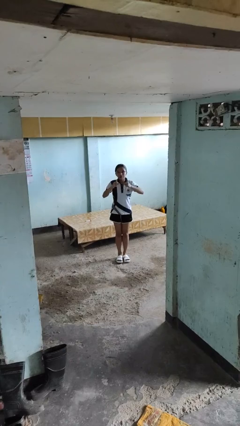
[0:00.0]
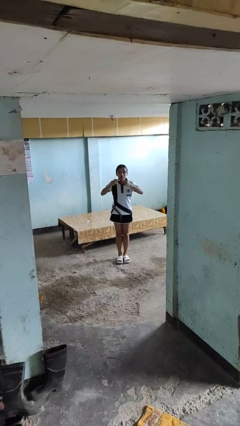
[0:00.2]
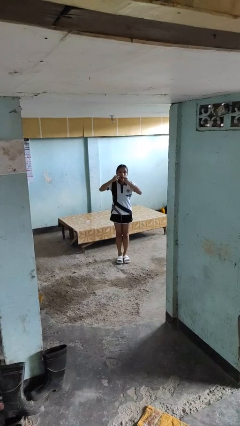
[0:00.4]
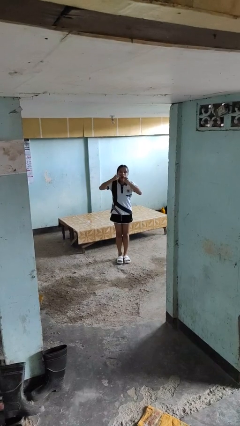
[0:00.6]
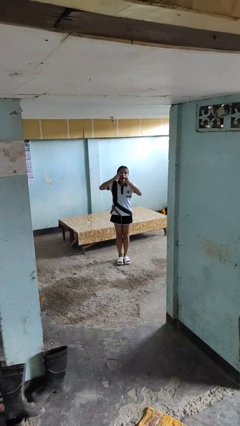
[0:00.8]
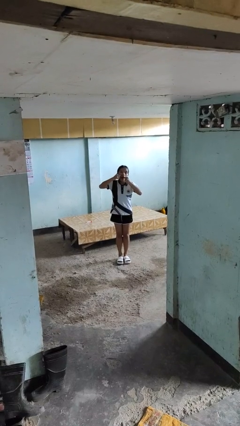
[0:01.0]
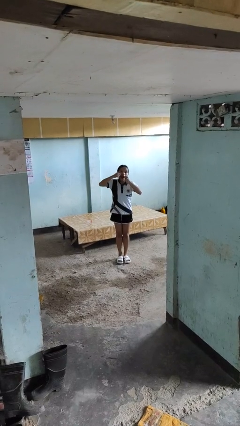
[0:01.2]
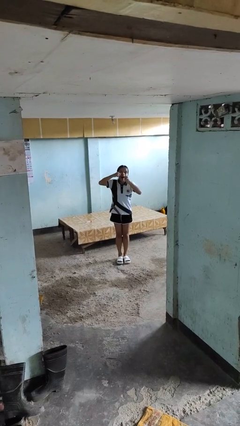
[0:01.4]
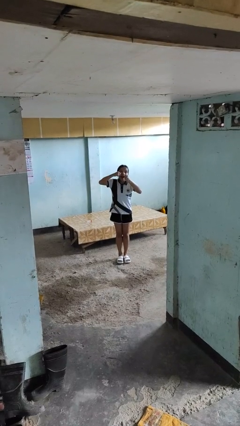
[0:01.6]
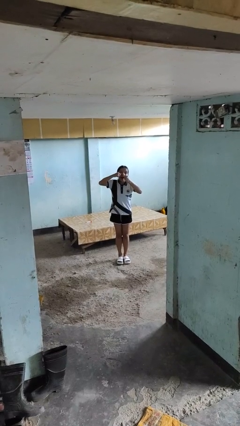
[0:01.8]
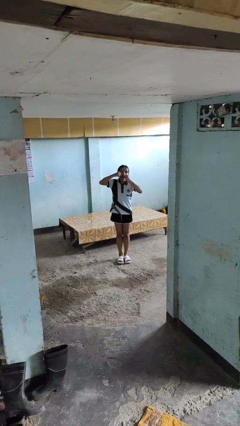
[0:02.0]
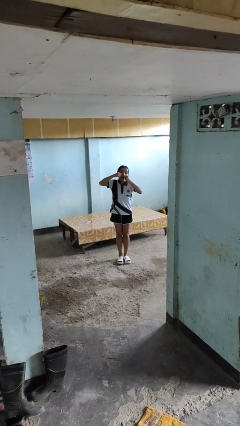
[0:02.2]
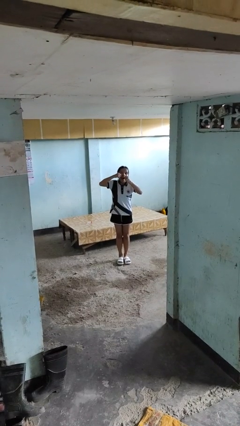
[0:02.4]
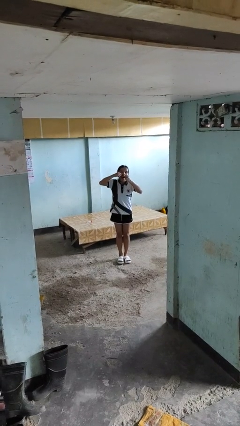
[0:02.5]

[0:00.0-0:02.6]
person flosses

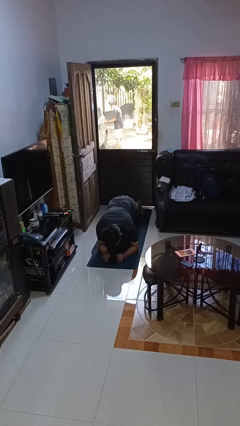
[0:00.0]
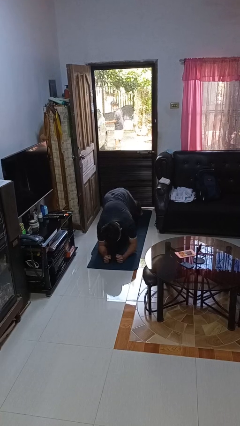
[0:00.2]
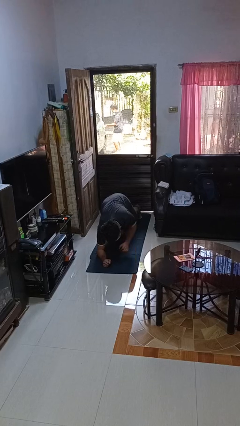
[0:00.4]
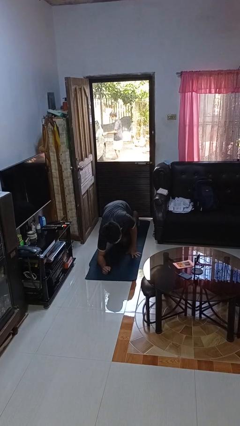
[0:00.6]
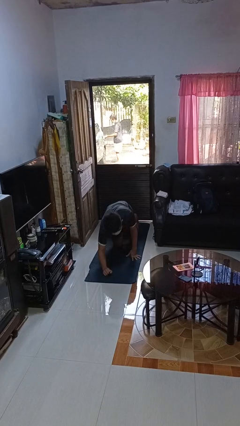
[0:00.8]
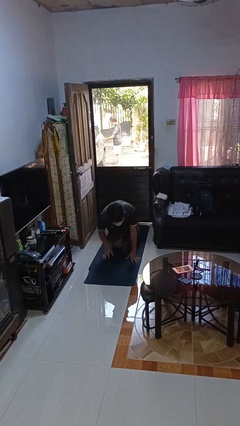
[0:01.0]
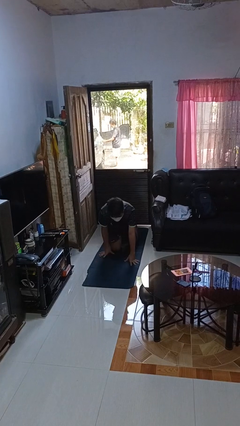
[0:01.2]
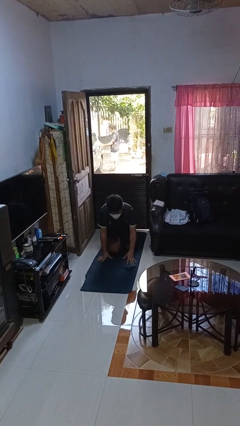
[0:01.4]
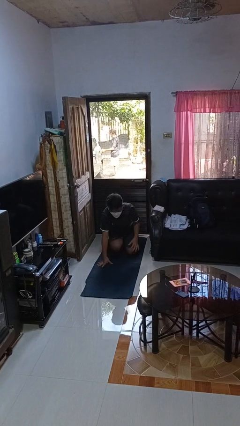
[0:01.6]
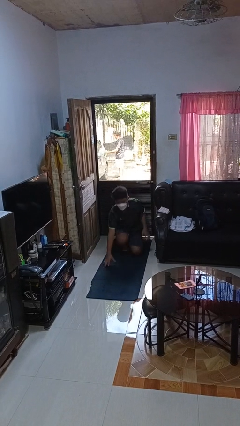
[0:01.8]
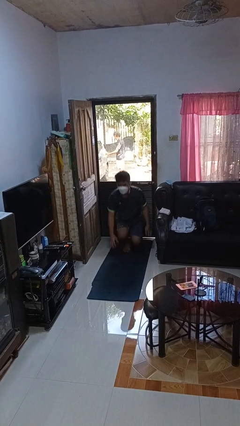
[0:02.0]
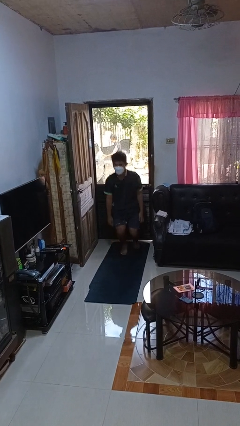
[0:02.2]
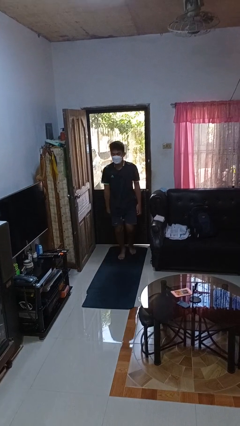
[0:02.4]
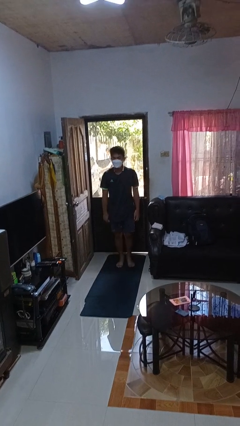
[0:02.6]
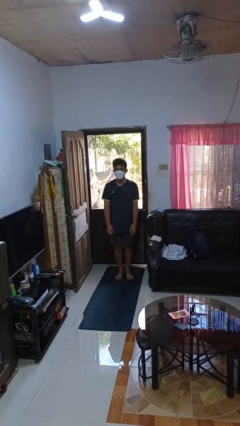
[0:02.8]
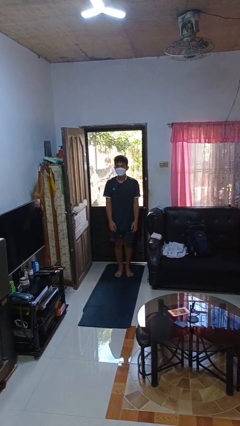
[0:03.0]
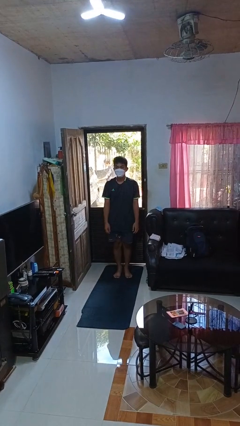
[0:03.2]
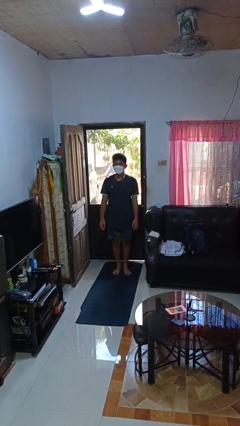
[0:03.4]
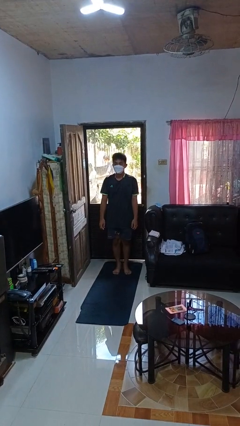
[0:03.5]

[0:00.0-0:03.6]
person stands up from floor

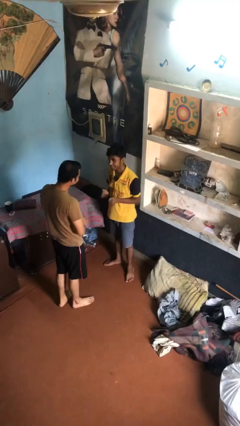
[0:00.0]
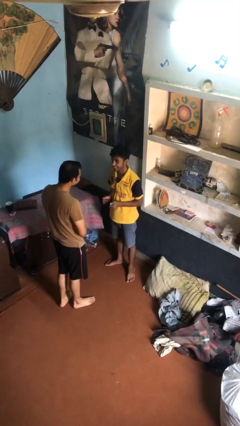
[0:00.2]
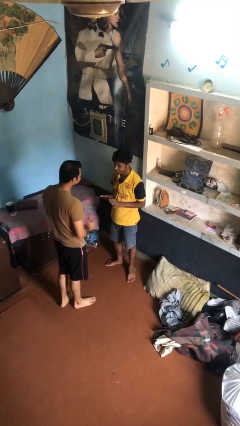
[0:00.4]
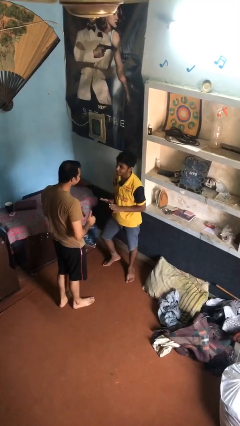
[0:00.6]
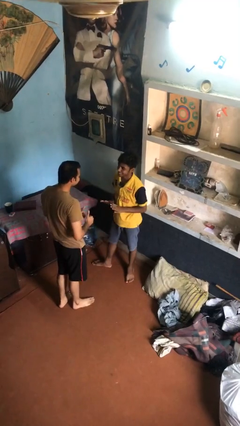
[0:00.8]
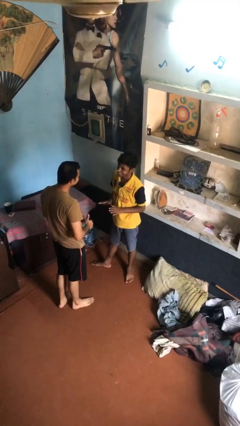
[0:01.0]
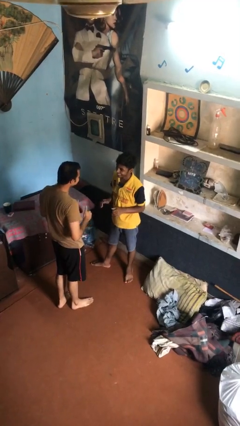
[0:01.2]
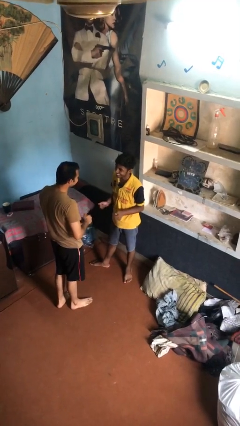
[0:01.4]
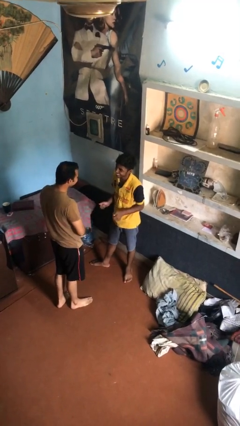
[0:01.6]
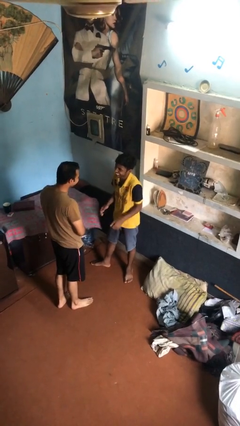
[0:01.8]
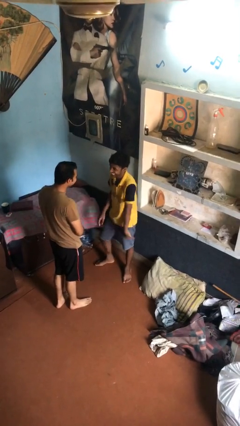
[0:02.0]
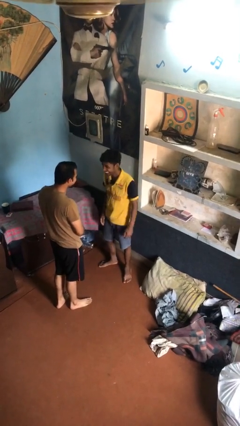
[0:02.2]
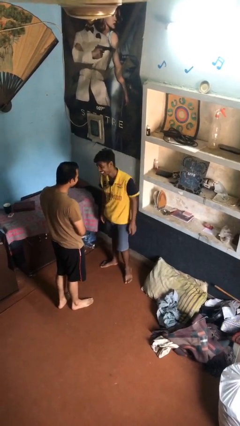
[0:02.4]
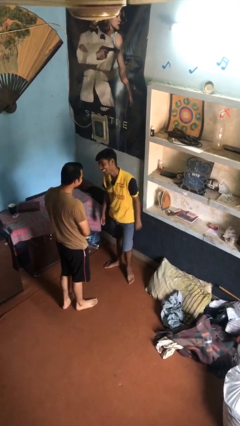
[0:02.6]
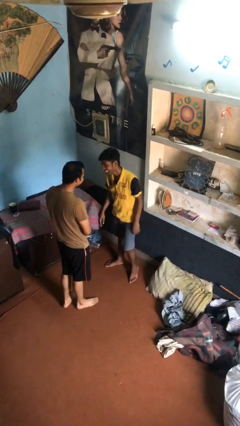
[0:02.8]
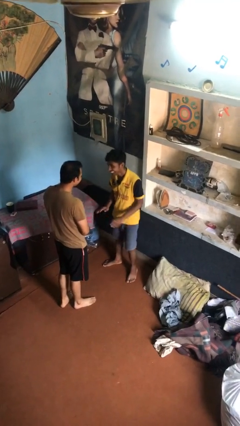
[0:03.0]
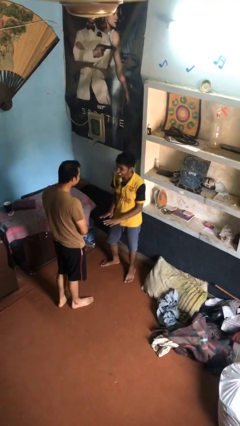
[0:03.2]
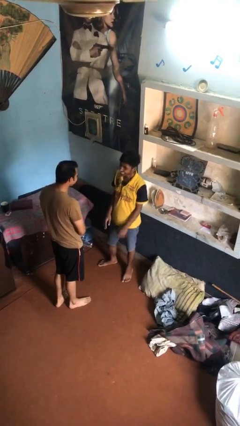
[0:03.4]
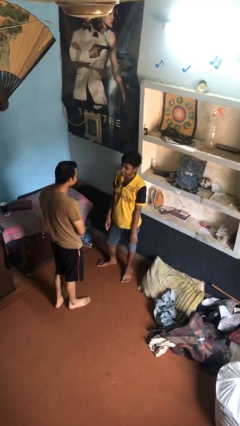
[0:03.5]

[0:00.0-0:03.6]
person talks to person

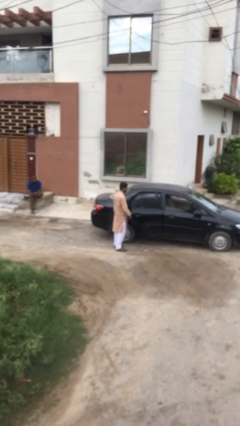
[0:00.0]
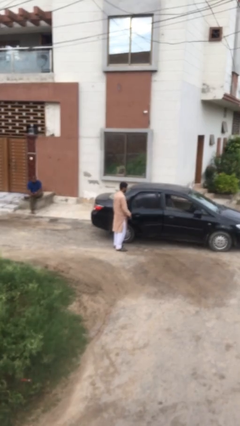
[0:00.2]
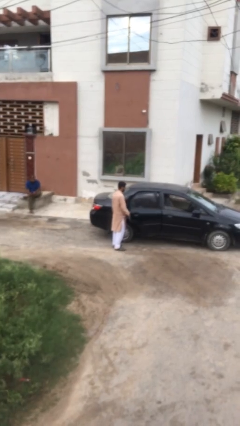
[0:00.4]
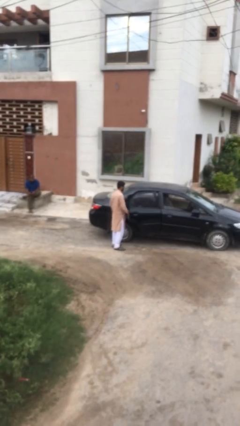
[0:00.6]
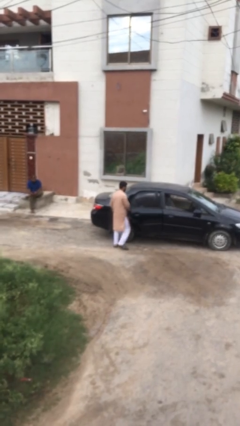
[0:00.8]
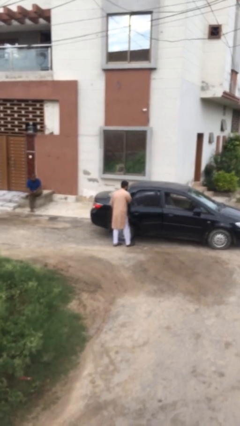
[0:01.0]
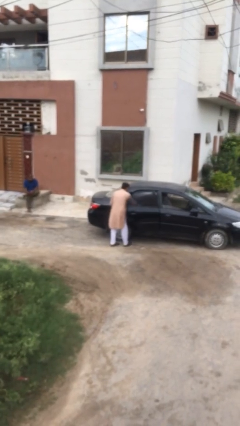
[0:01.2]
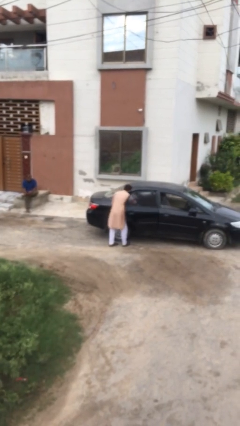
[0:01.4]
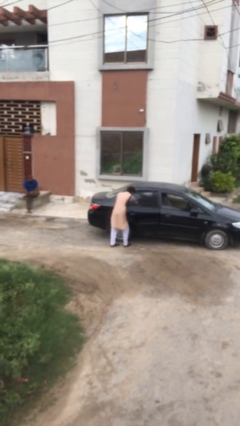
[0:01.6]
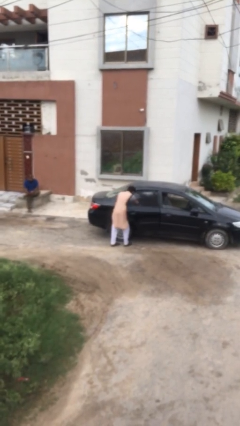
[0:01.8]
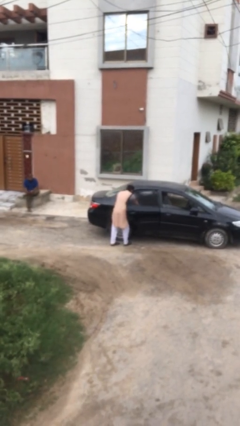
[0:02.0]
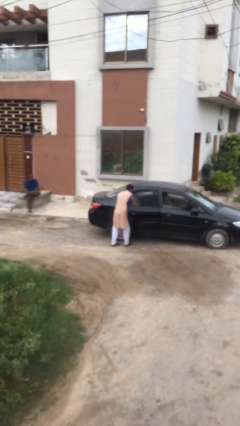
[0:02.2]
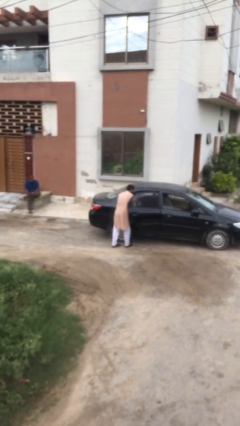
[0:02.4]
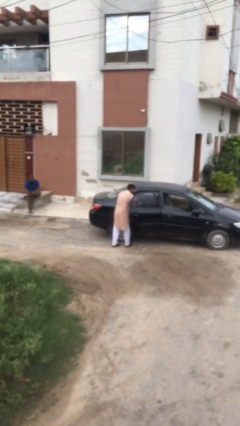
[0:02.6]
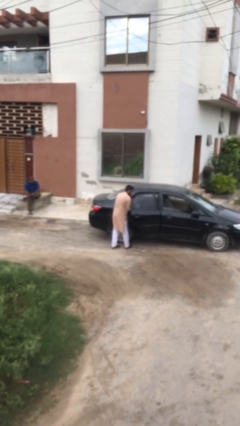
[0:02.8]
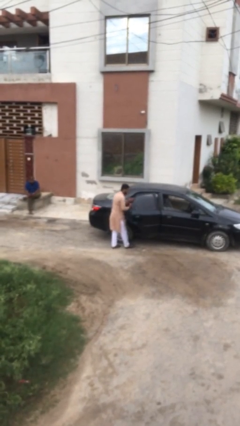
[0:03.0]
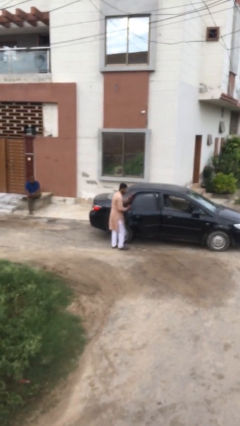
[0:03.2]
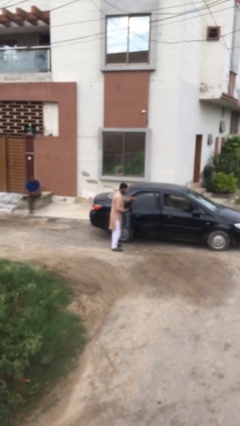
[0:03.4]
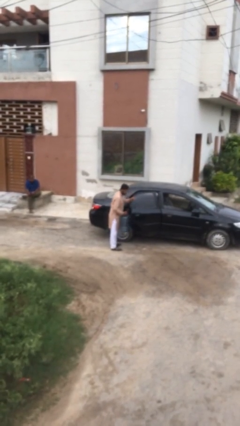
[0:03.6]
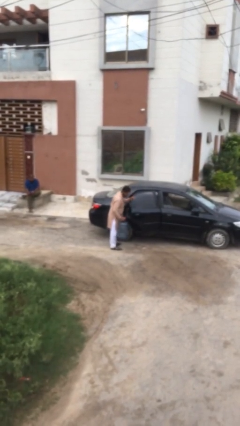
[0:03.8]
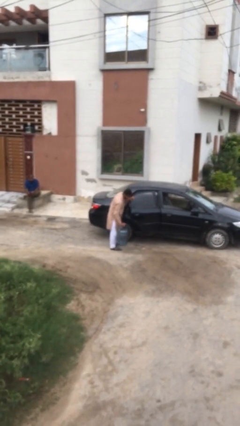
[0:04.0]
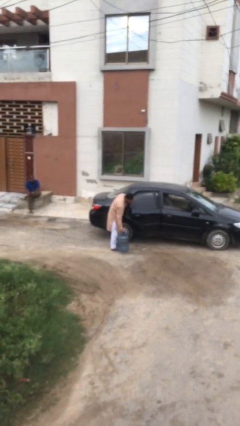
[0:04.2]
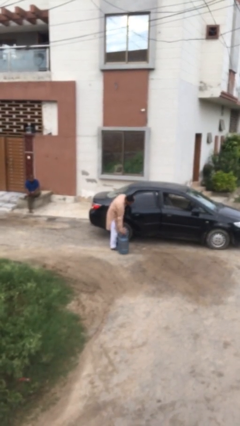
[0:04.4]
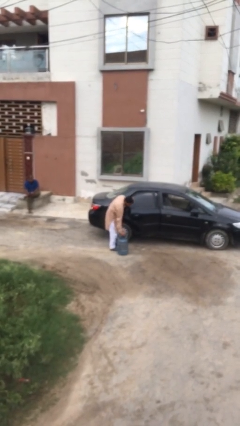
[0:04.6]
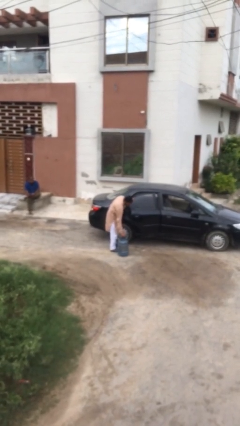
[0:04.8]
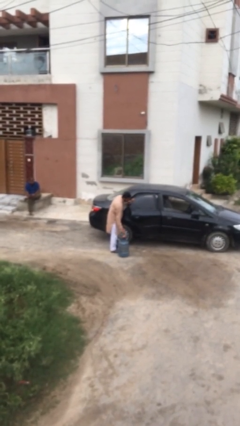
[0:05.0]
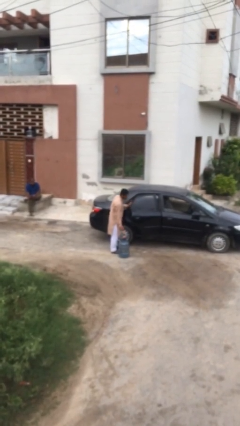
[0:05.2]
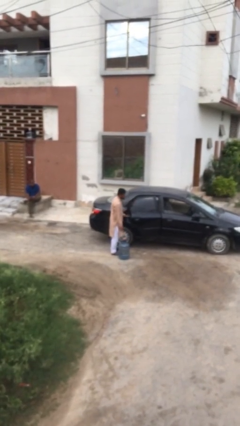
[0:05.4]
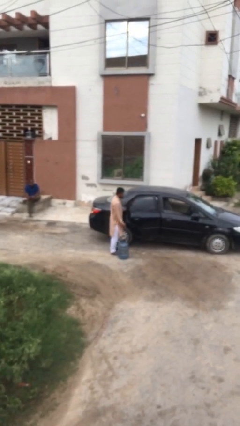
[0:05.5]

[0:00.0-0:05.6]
person unloads car

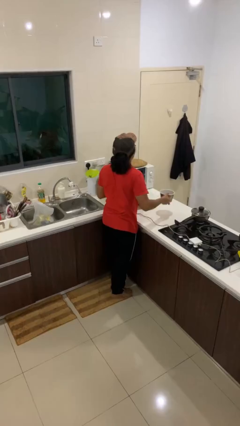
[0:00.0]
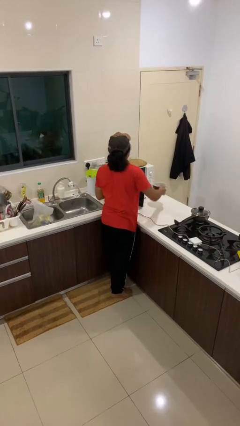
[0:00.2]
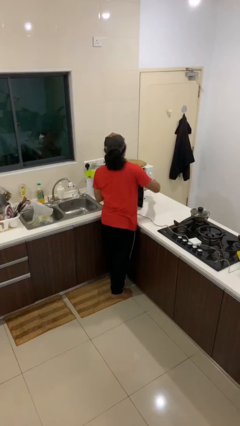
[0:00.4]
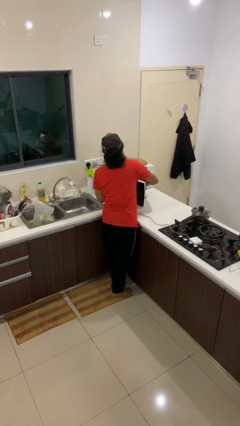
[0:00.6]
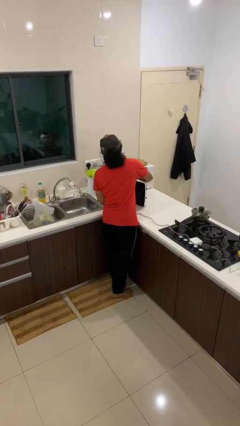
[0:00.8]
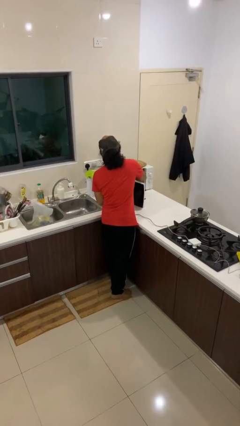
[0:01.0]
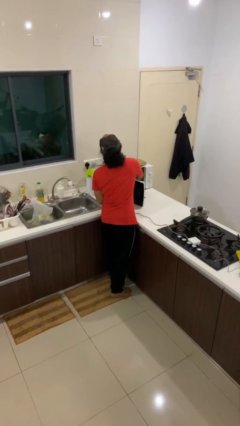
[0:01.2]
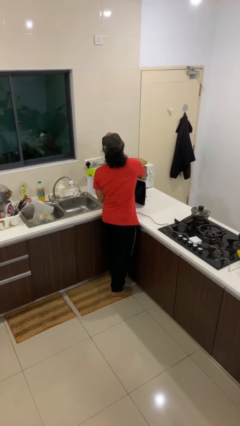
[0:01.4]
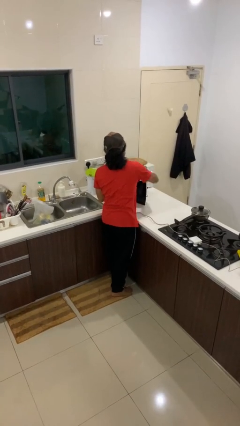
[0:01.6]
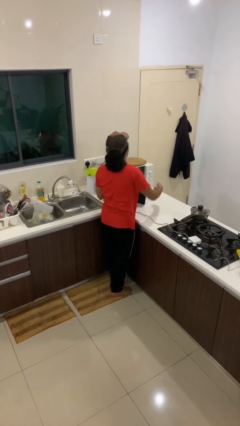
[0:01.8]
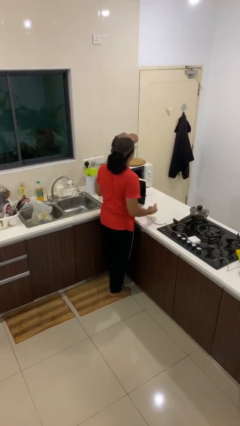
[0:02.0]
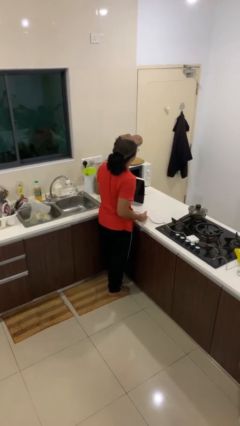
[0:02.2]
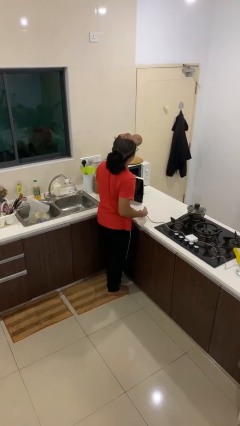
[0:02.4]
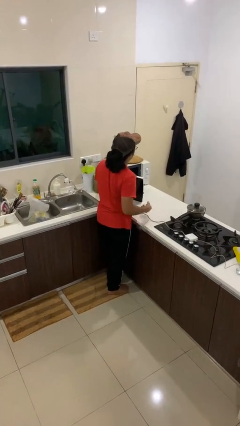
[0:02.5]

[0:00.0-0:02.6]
person puts object into microwave
